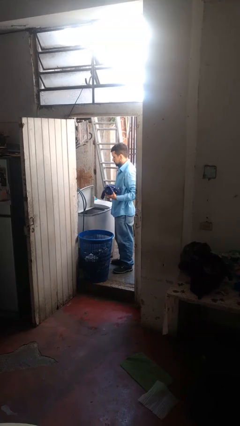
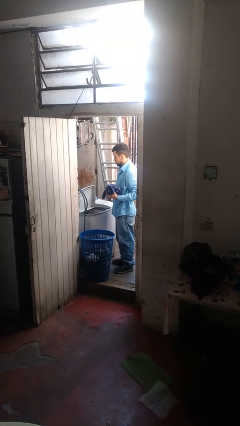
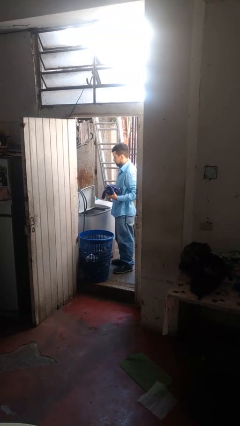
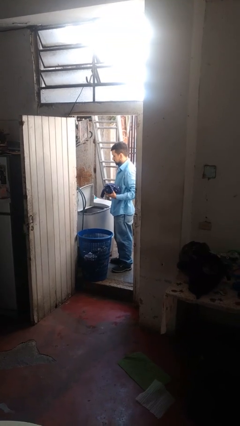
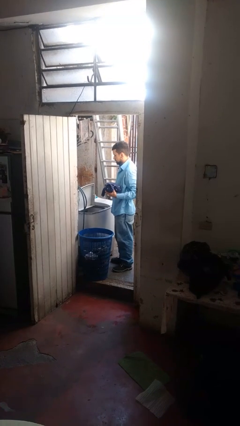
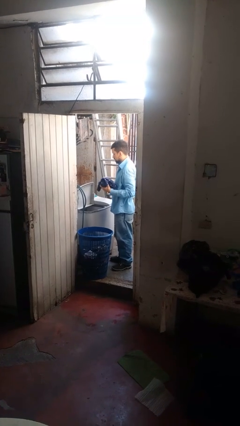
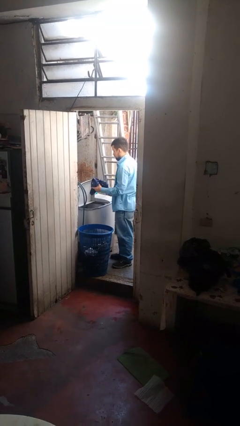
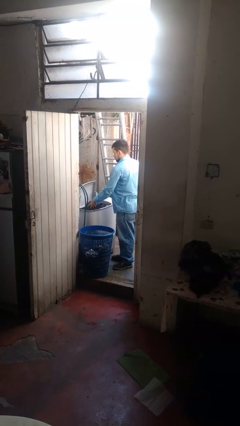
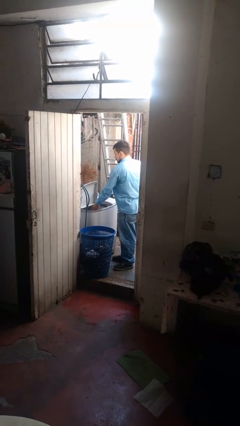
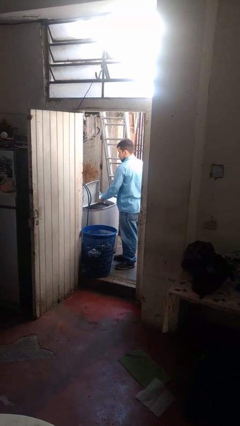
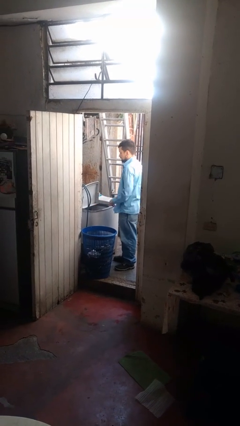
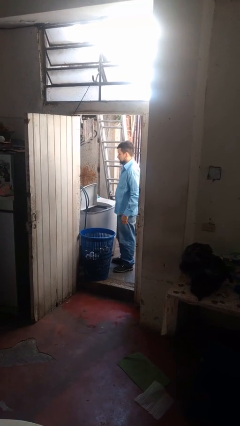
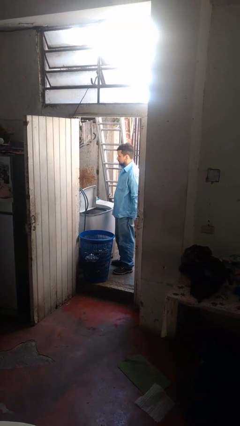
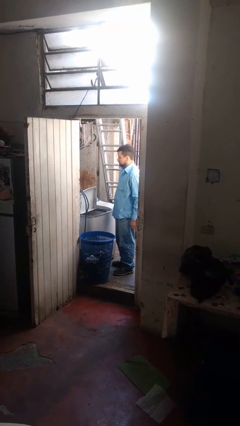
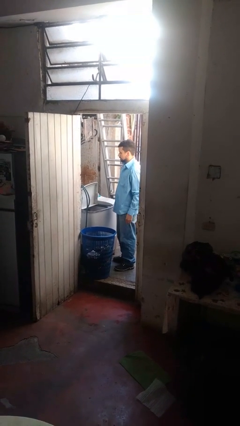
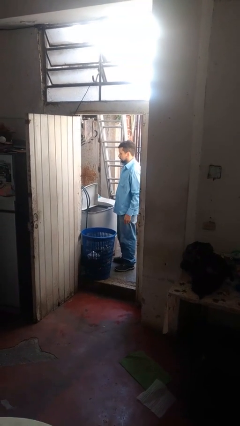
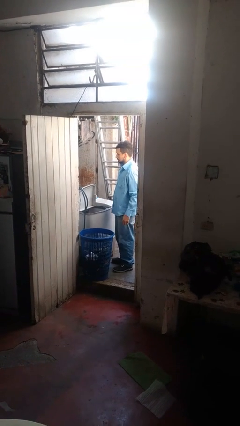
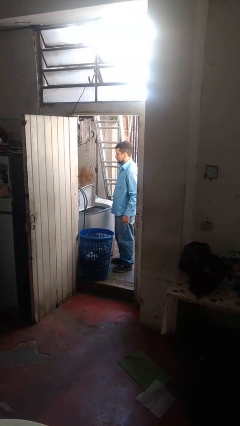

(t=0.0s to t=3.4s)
person loads clotheswasher

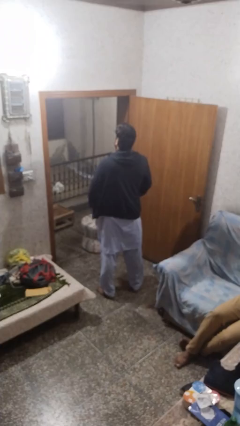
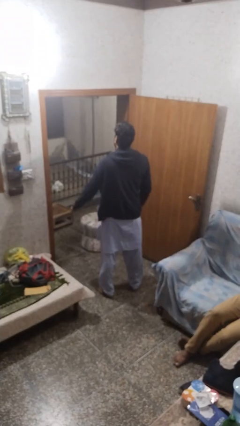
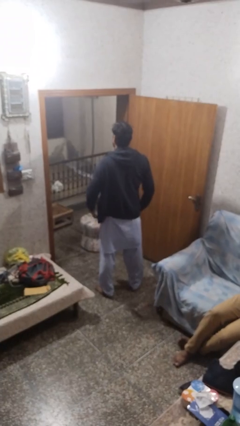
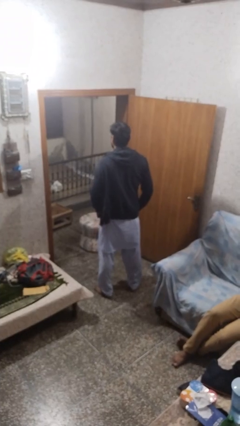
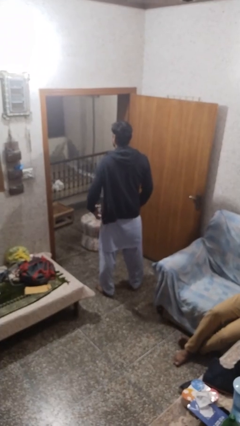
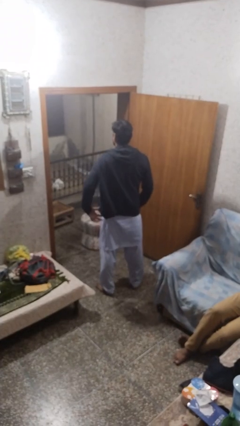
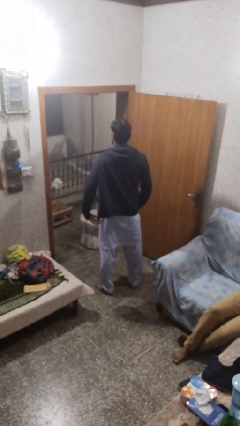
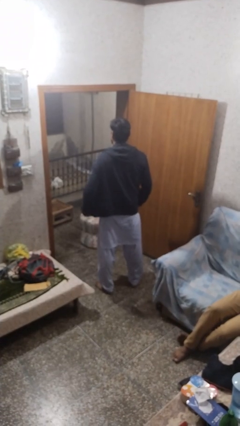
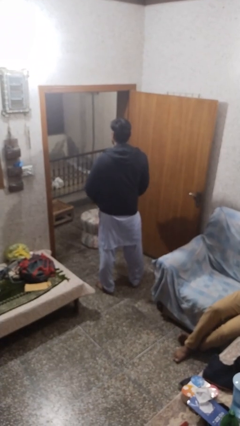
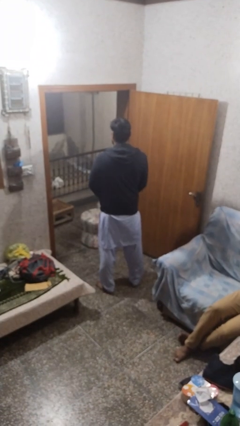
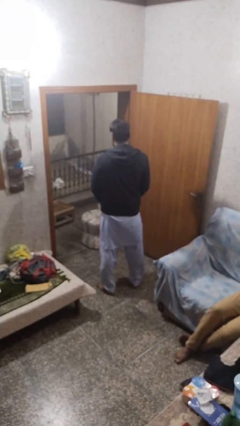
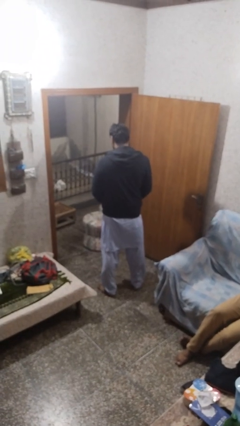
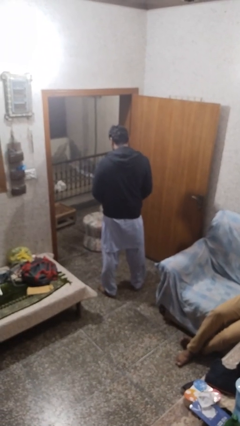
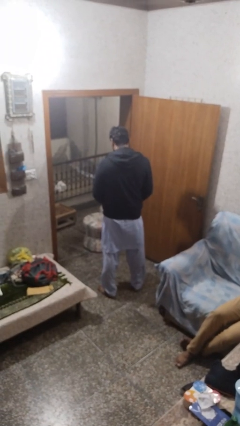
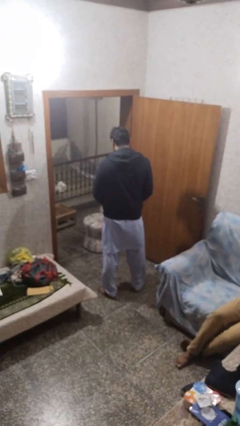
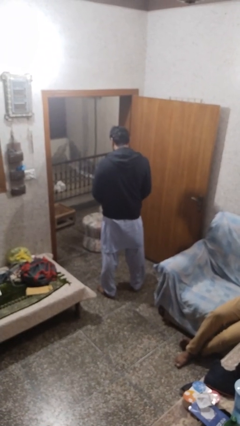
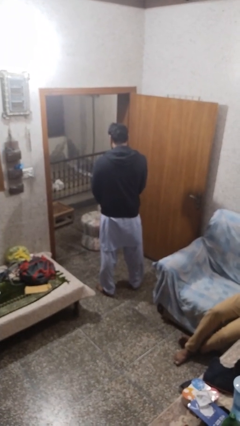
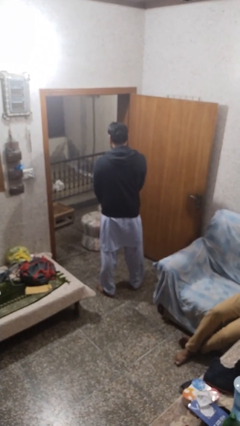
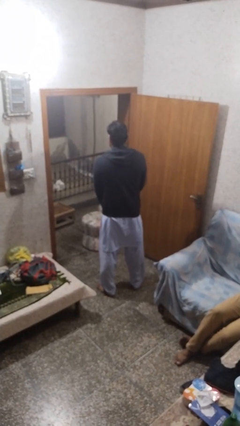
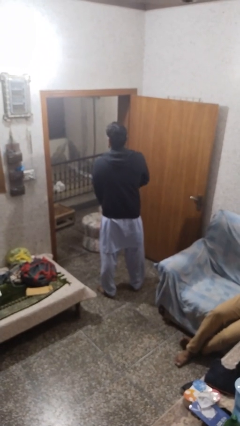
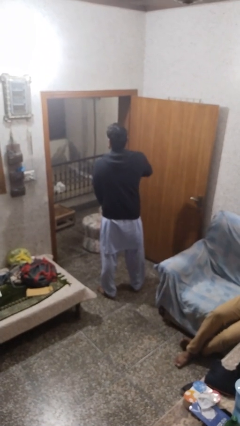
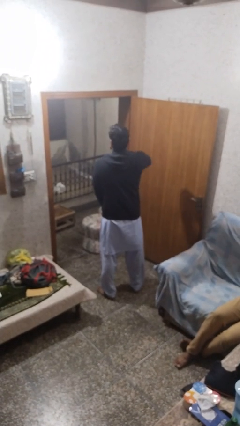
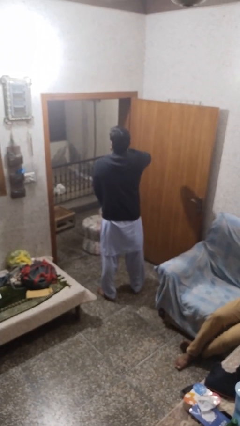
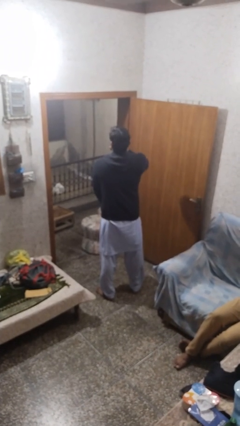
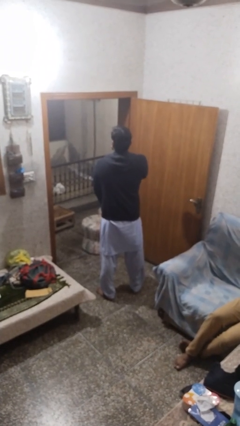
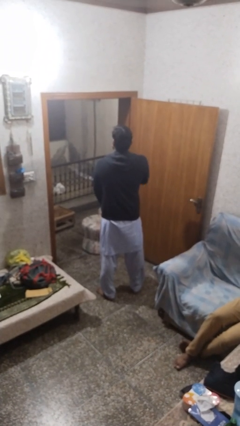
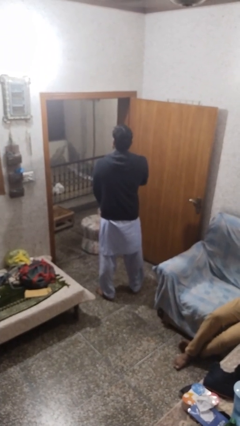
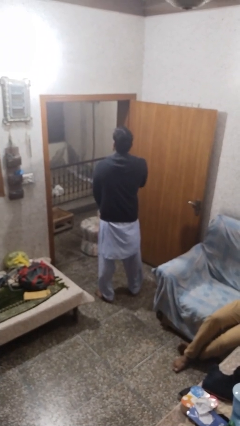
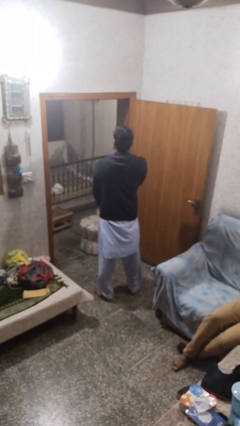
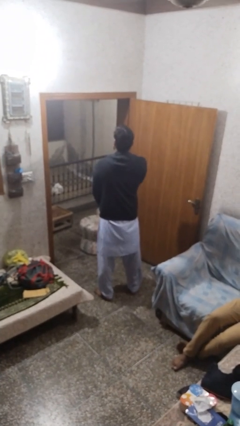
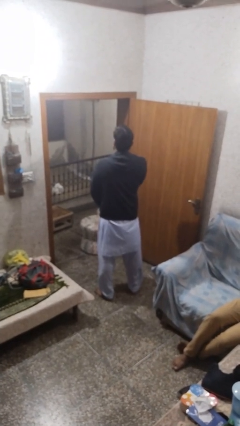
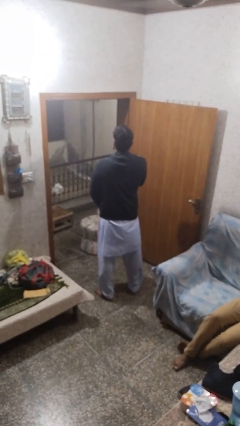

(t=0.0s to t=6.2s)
person zips up jacket

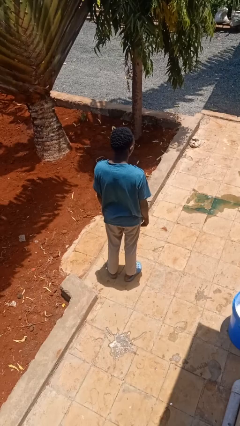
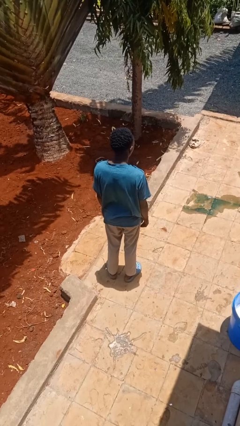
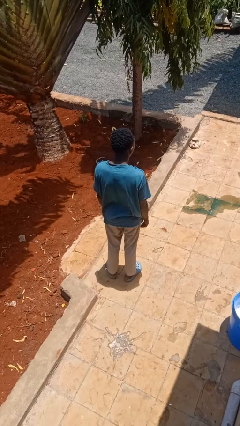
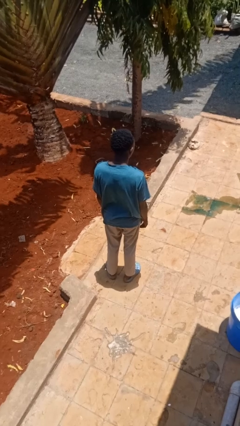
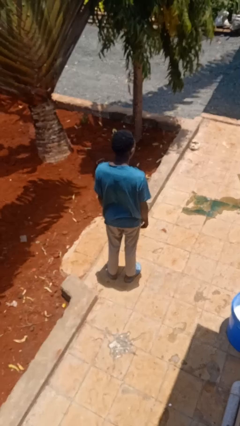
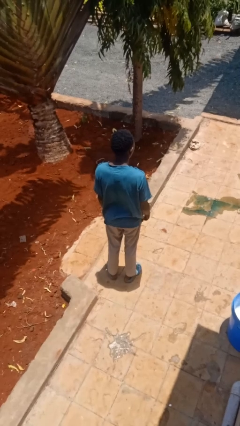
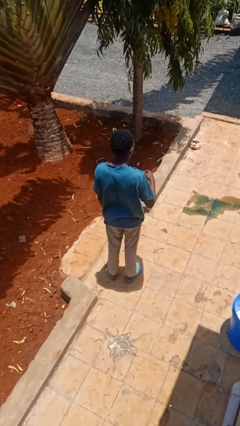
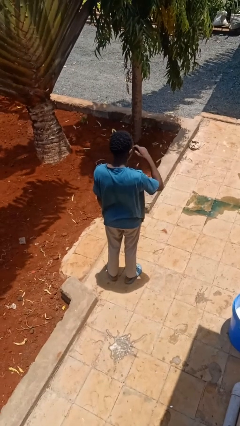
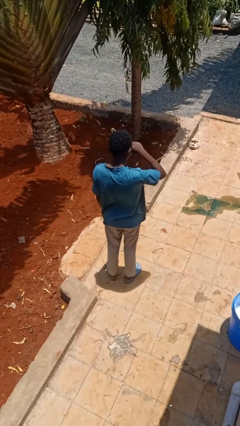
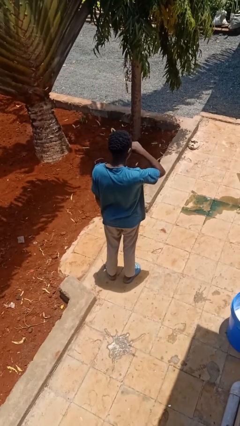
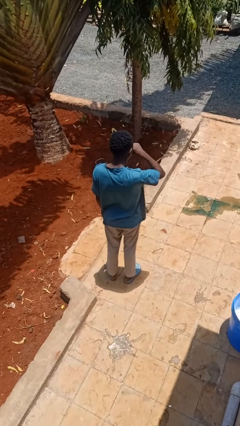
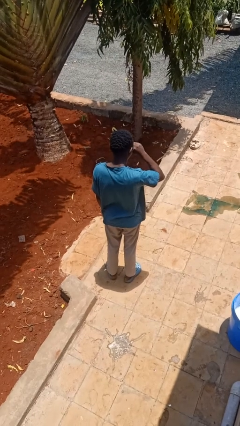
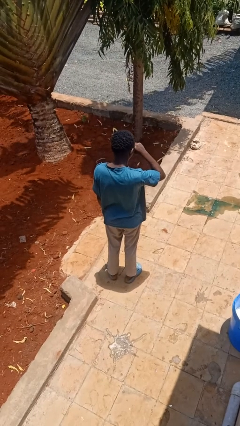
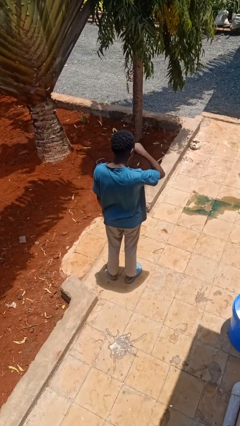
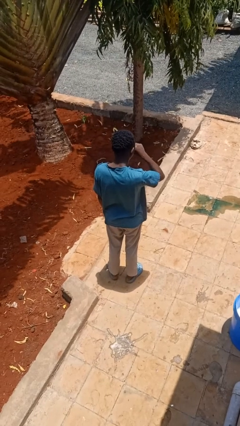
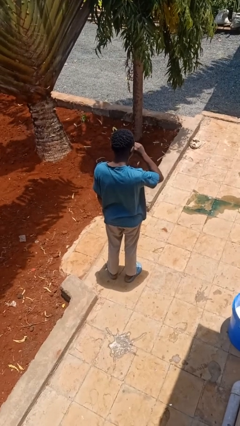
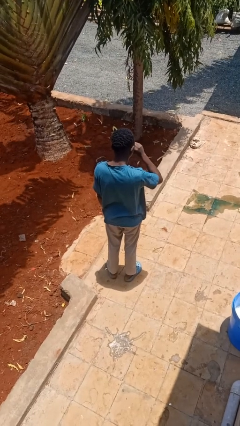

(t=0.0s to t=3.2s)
person rubs eyes

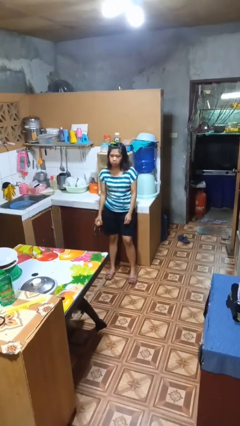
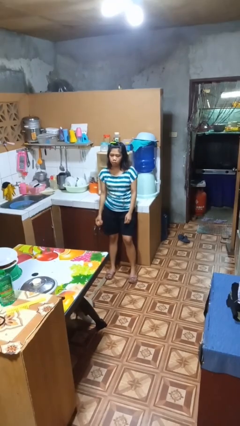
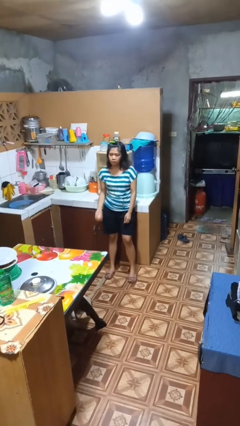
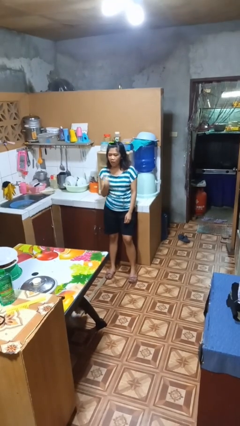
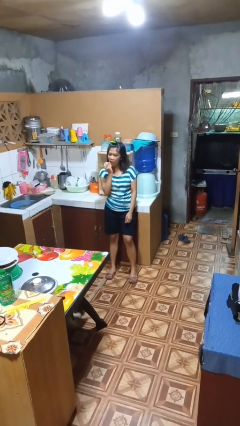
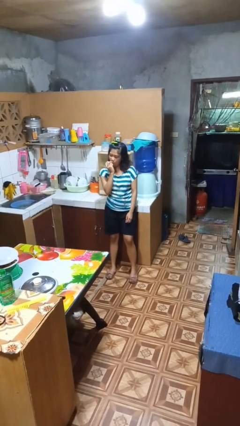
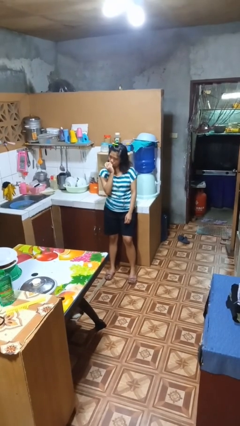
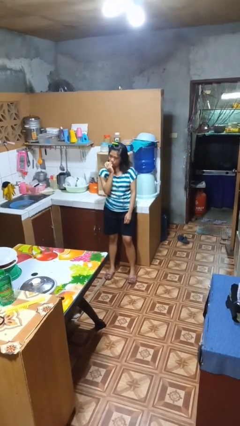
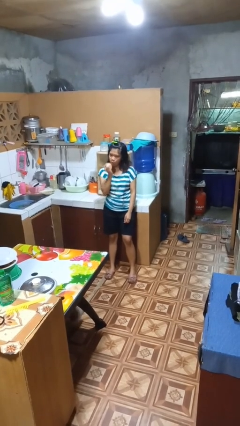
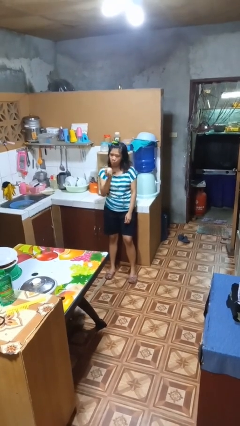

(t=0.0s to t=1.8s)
person eats apple

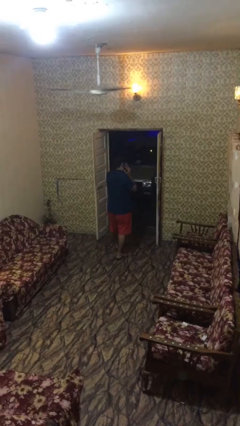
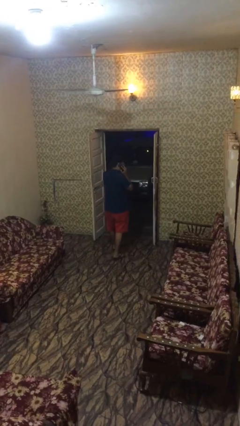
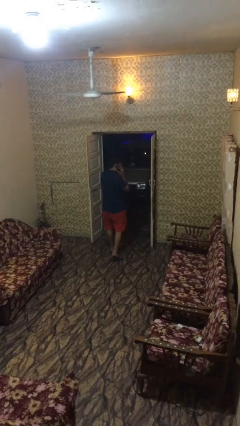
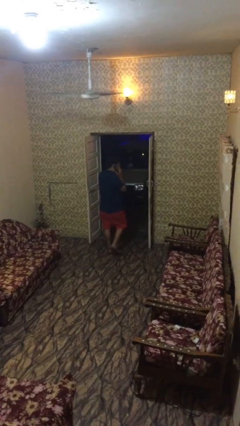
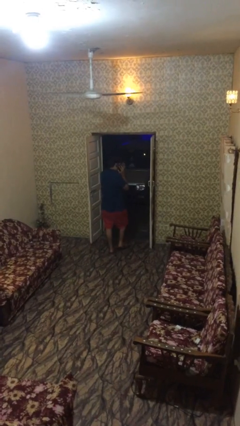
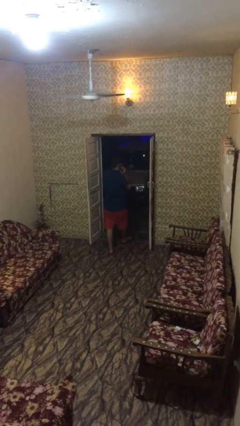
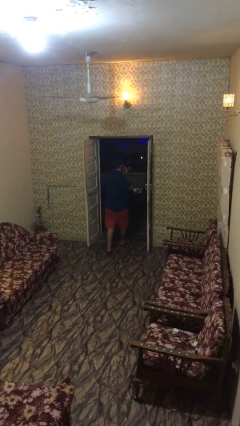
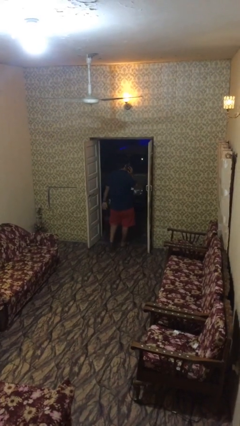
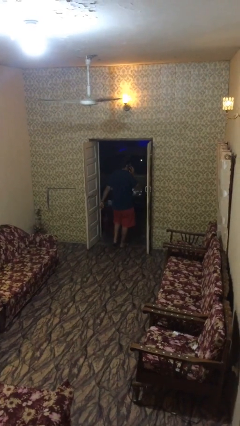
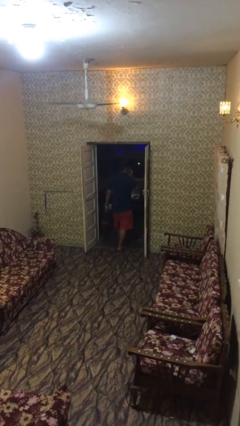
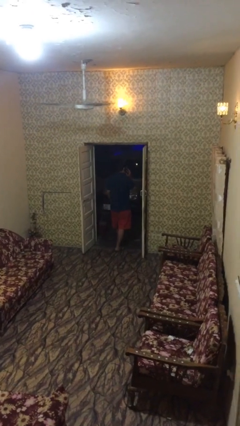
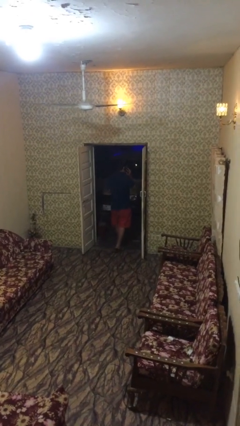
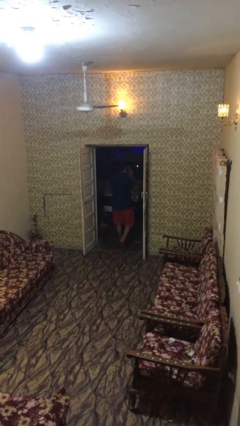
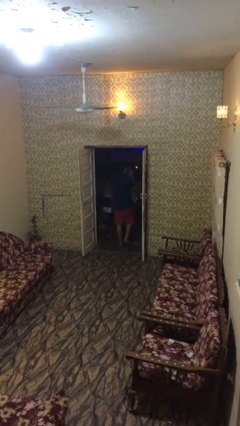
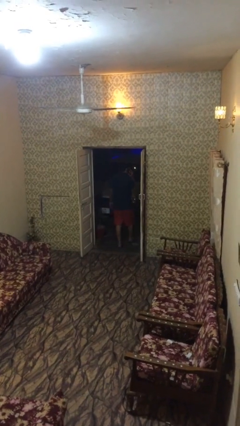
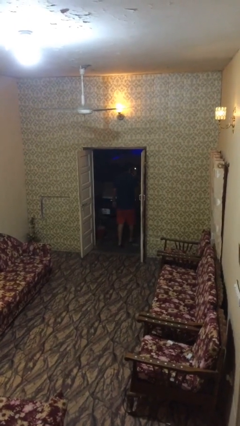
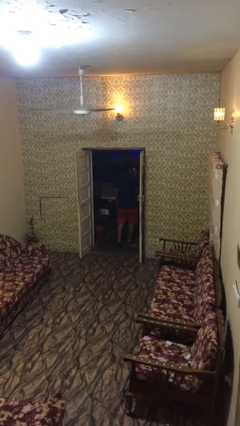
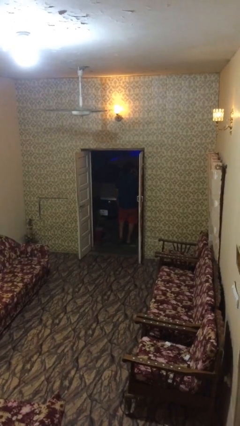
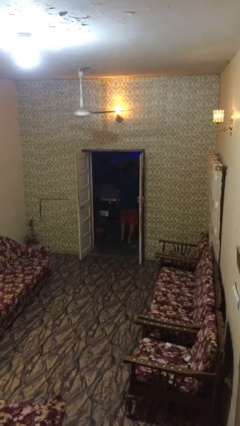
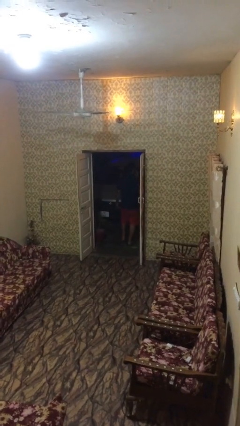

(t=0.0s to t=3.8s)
person exits scene through structure
